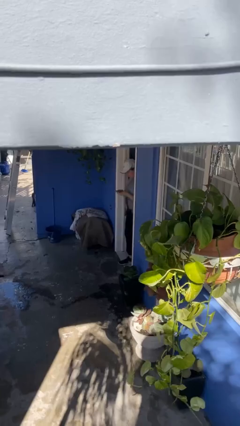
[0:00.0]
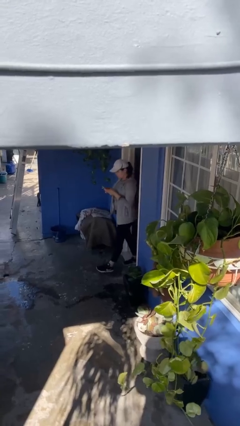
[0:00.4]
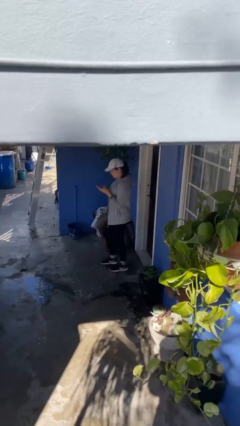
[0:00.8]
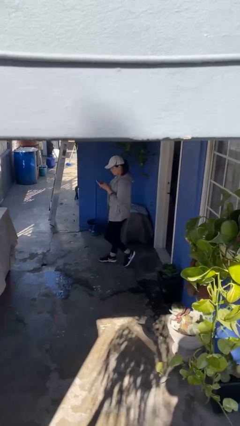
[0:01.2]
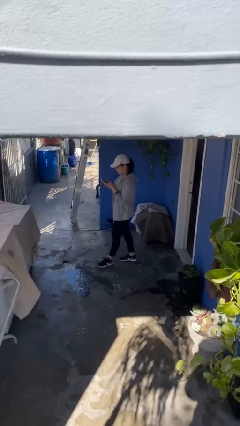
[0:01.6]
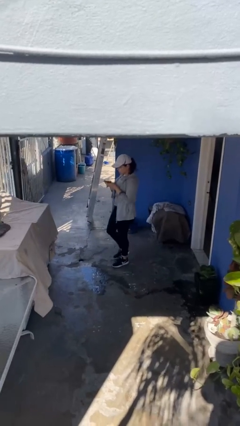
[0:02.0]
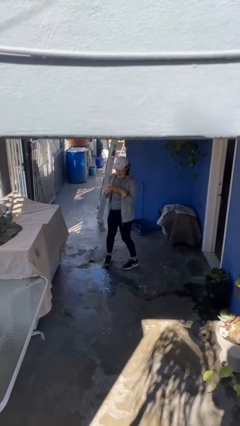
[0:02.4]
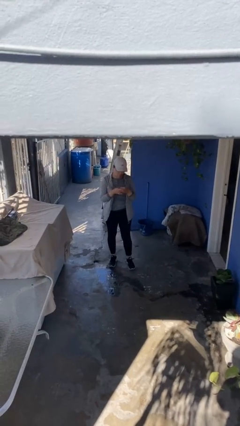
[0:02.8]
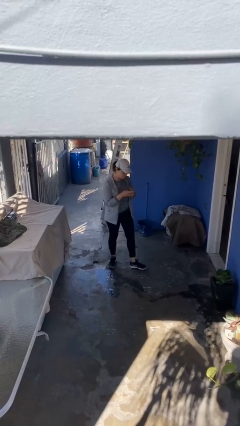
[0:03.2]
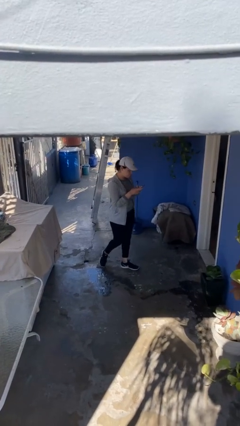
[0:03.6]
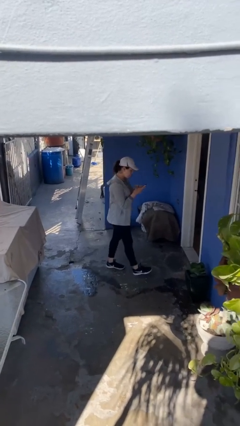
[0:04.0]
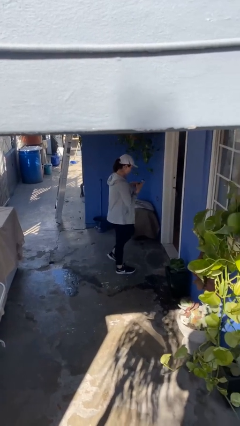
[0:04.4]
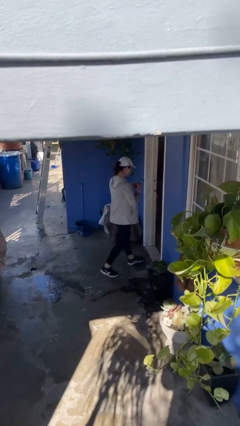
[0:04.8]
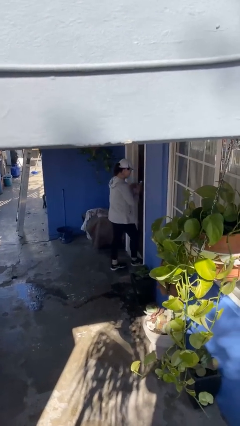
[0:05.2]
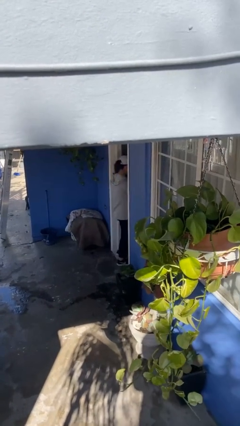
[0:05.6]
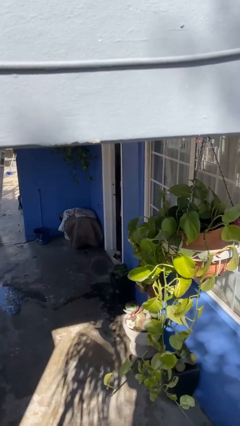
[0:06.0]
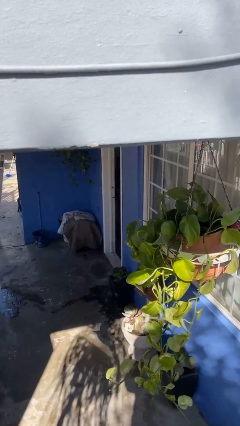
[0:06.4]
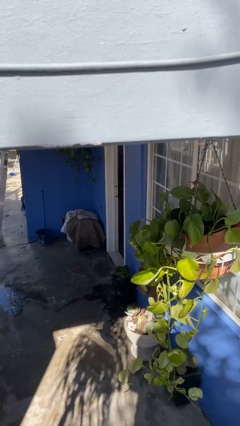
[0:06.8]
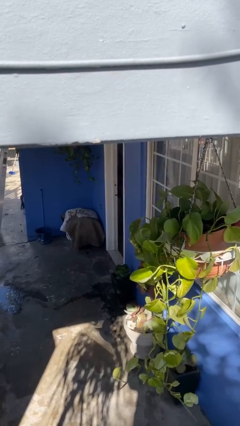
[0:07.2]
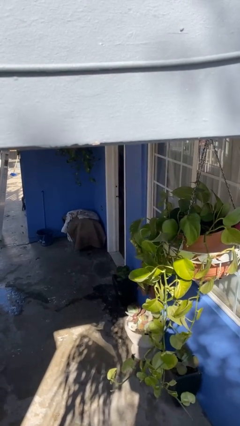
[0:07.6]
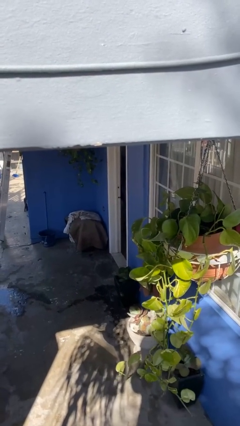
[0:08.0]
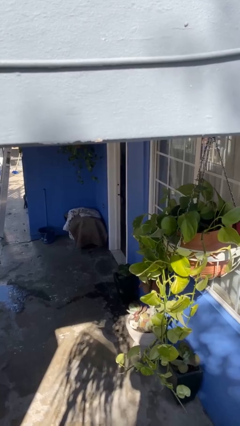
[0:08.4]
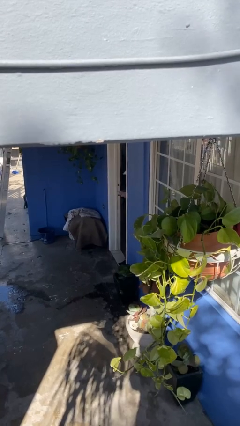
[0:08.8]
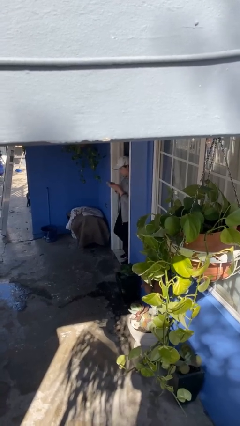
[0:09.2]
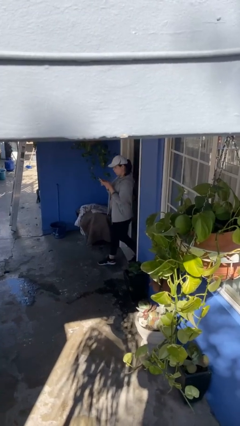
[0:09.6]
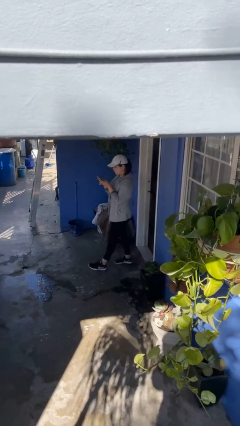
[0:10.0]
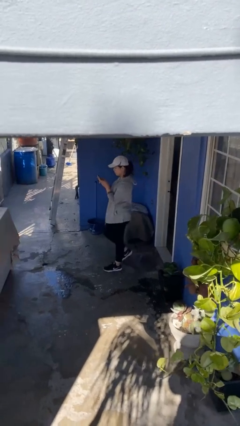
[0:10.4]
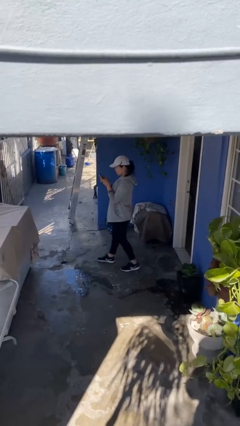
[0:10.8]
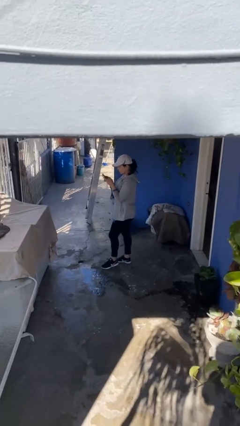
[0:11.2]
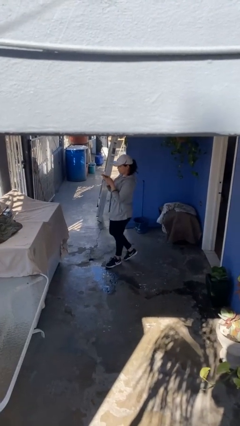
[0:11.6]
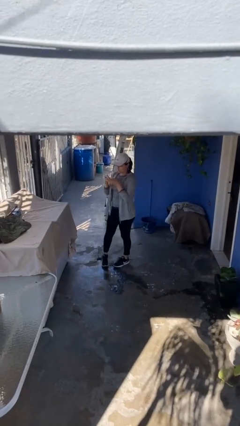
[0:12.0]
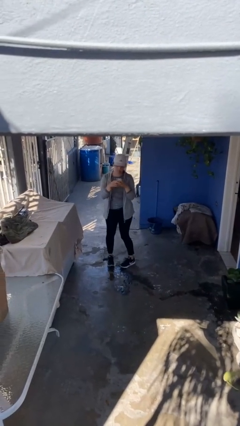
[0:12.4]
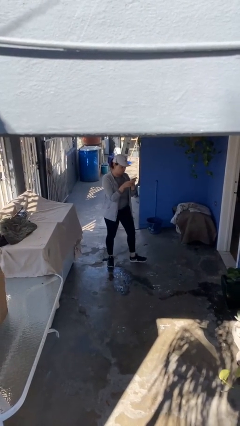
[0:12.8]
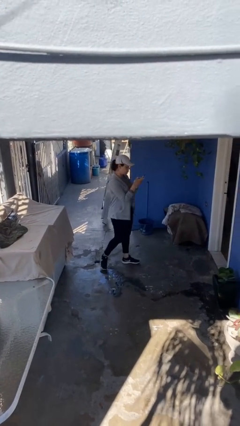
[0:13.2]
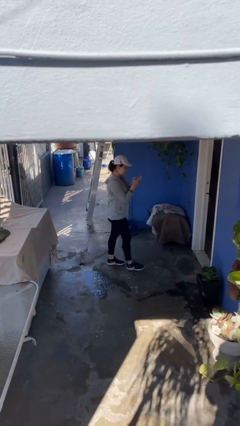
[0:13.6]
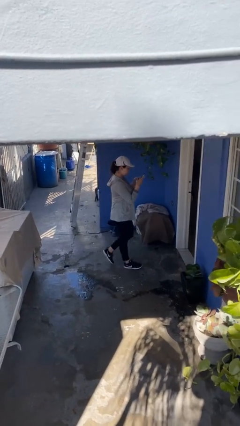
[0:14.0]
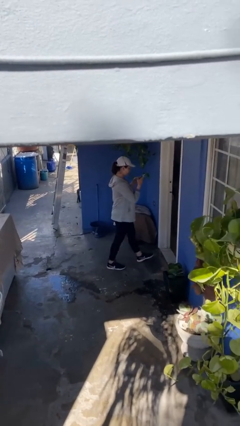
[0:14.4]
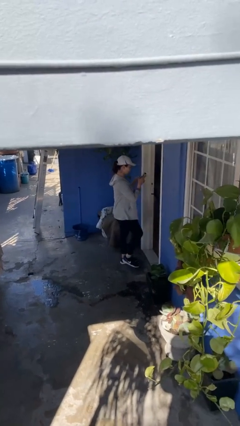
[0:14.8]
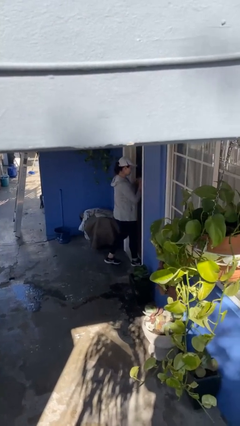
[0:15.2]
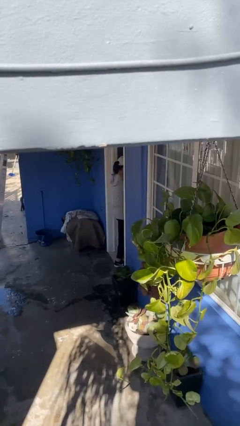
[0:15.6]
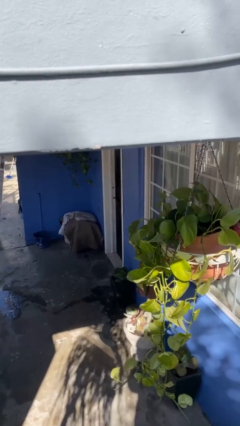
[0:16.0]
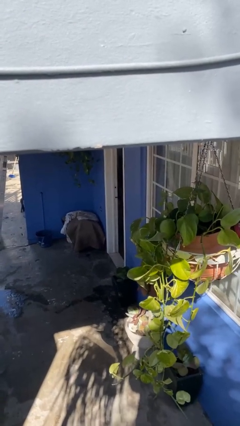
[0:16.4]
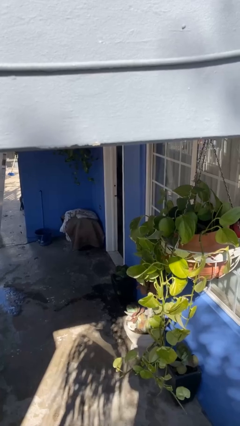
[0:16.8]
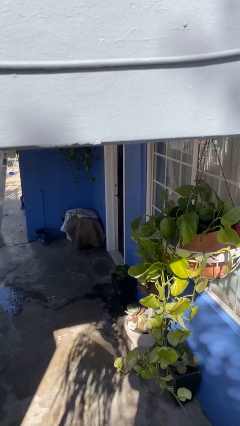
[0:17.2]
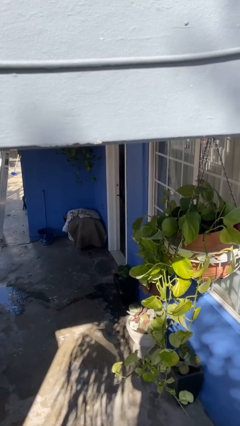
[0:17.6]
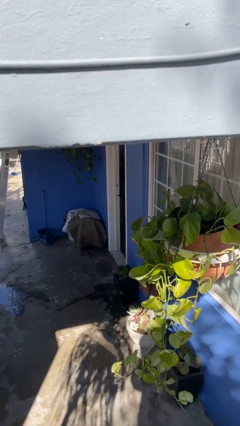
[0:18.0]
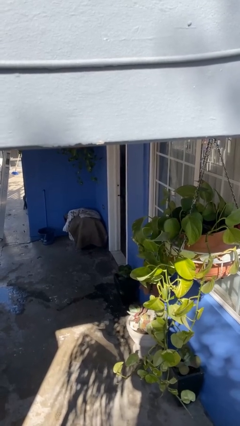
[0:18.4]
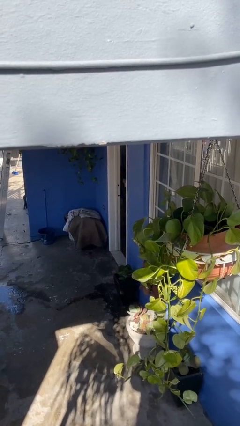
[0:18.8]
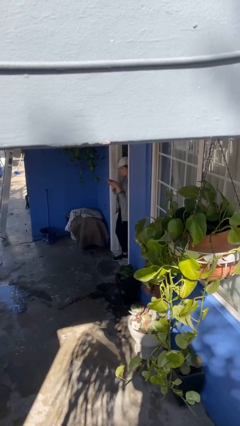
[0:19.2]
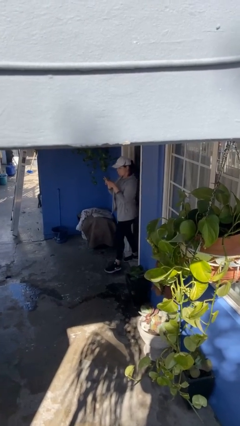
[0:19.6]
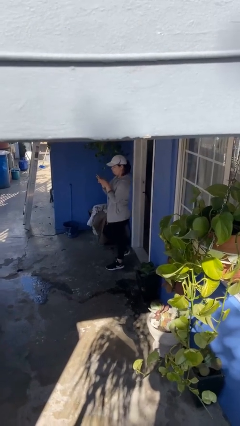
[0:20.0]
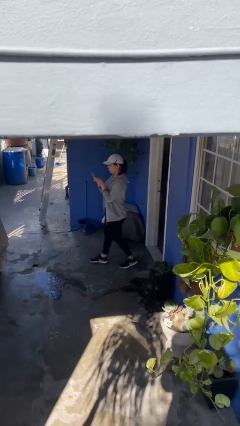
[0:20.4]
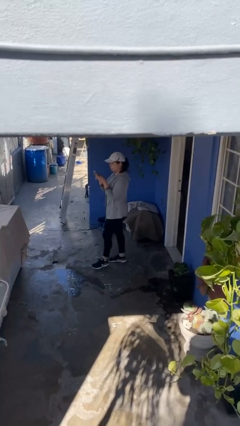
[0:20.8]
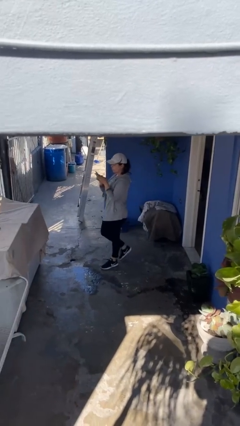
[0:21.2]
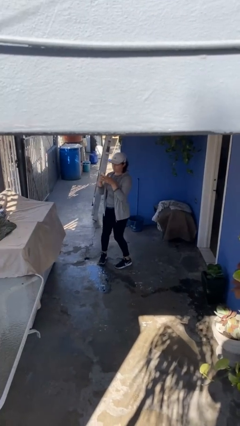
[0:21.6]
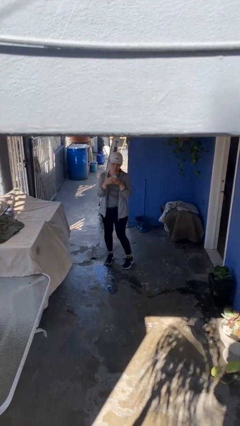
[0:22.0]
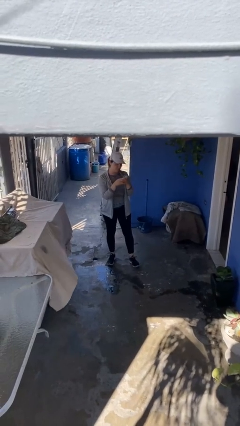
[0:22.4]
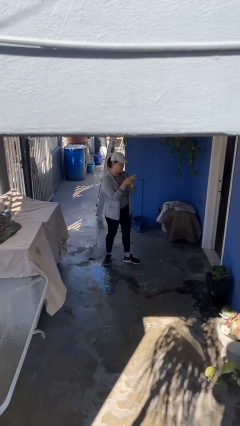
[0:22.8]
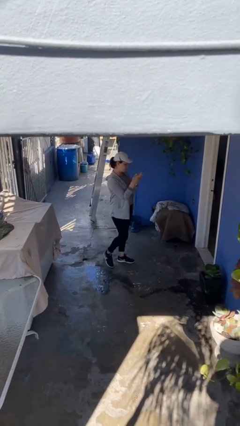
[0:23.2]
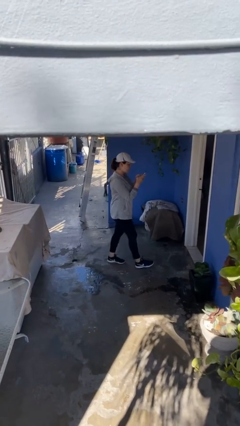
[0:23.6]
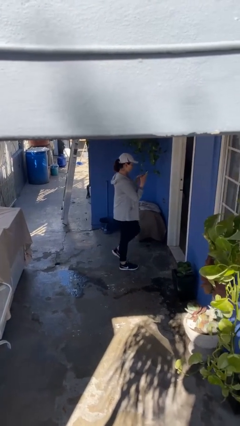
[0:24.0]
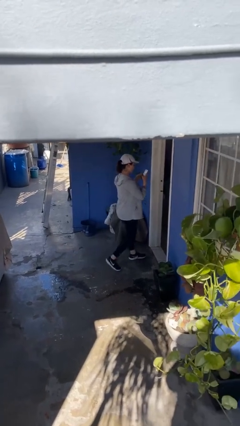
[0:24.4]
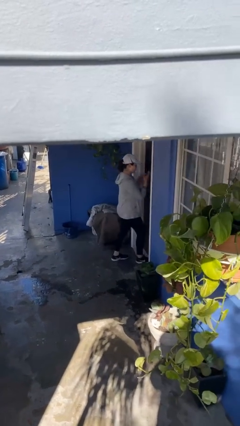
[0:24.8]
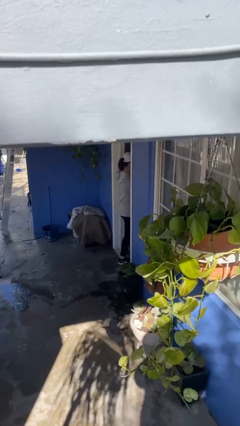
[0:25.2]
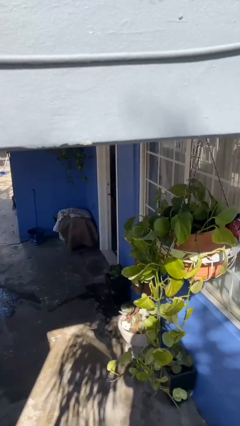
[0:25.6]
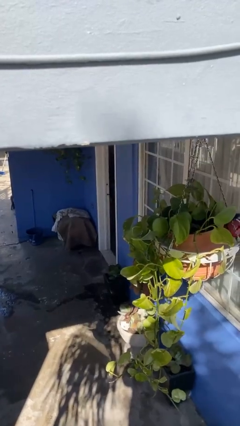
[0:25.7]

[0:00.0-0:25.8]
person texts on phone

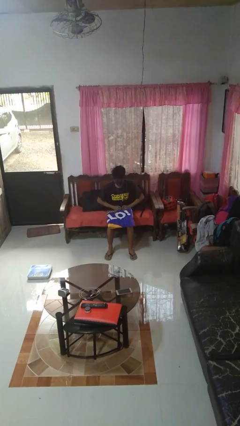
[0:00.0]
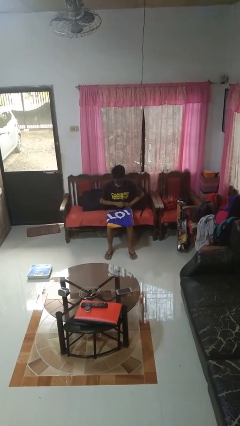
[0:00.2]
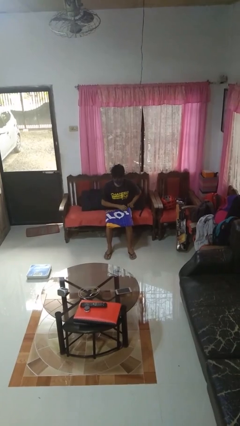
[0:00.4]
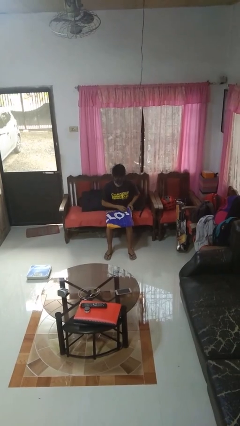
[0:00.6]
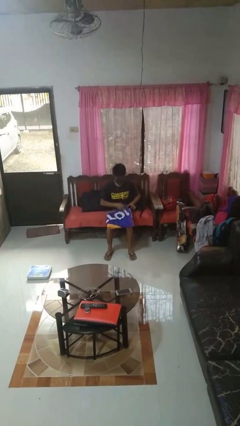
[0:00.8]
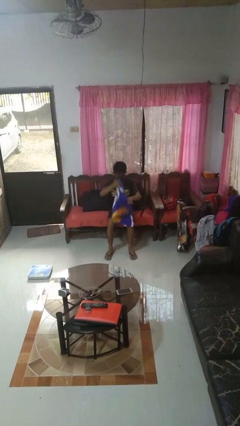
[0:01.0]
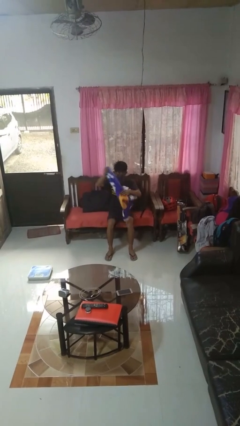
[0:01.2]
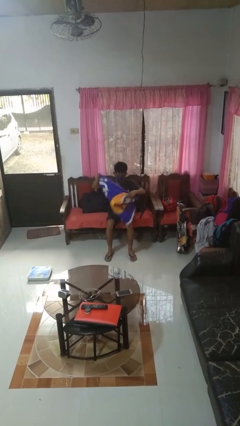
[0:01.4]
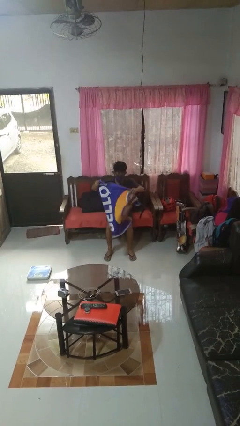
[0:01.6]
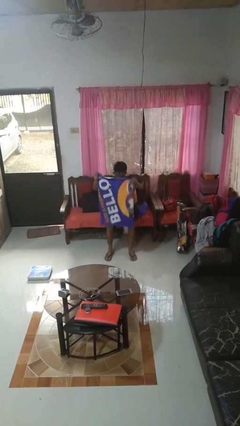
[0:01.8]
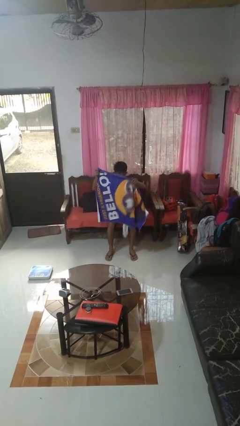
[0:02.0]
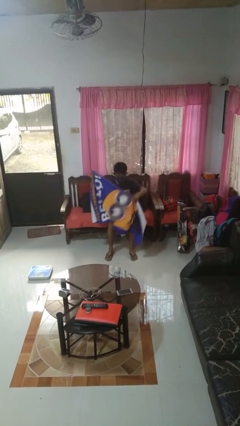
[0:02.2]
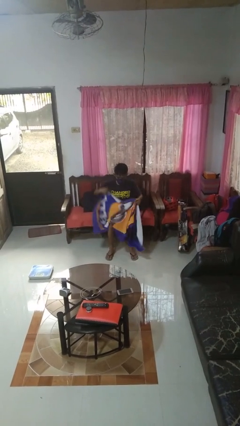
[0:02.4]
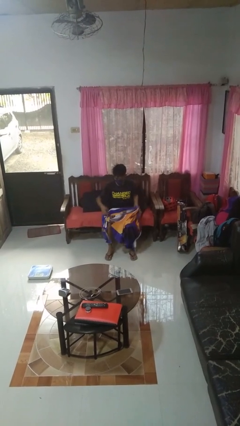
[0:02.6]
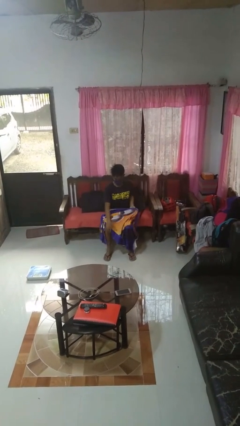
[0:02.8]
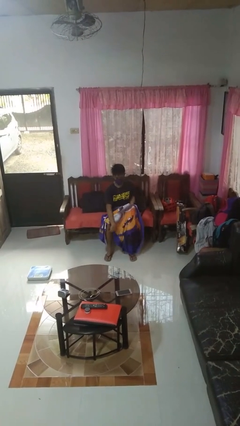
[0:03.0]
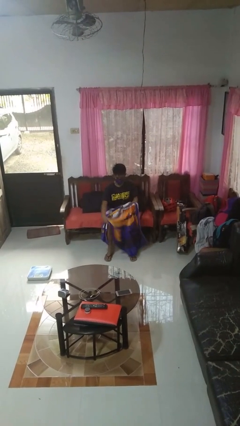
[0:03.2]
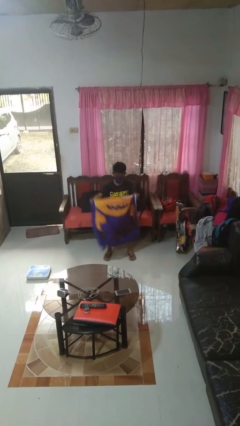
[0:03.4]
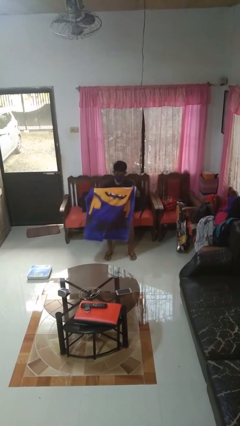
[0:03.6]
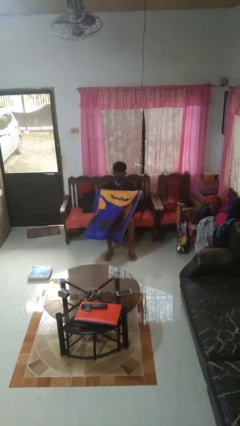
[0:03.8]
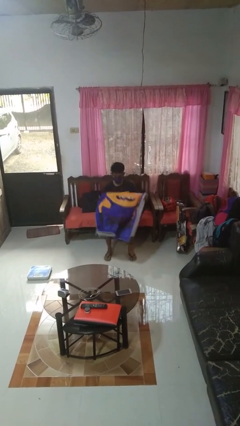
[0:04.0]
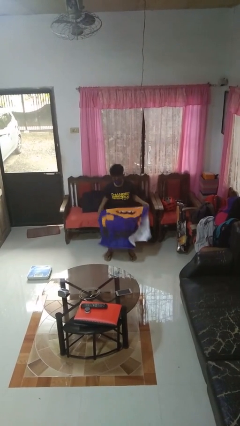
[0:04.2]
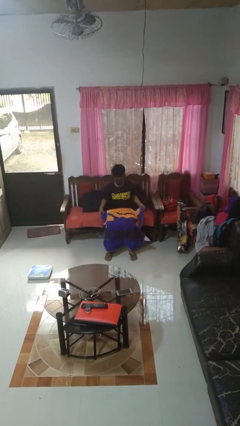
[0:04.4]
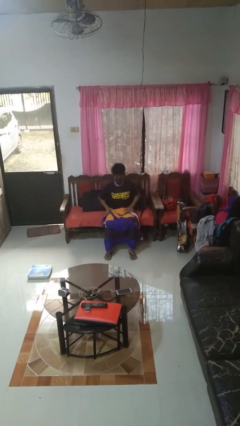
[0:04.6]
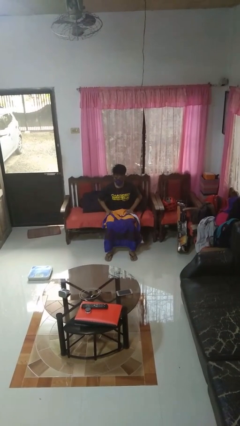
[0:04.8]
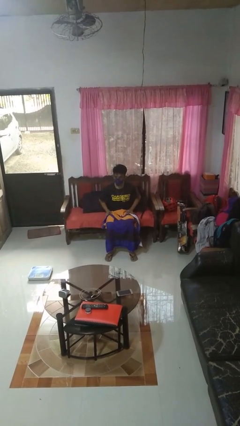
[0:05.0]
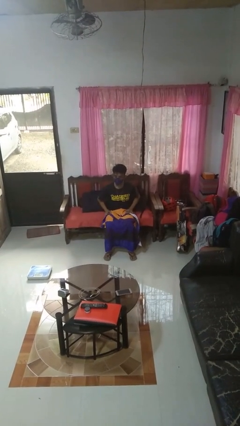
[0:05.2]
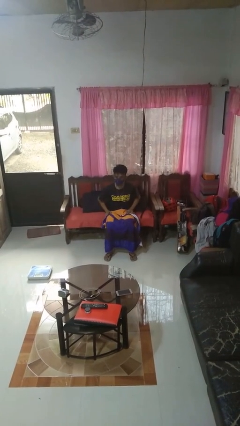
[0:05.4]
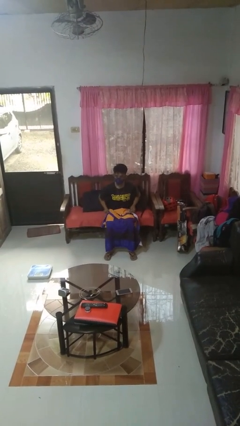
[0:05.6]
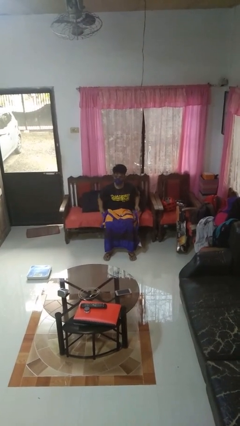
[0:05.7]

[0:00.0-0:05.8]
person folds towel
